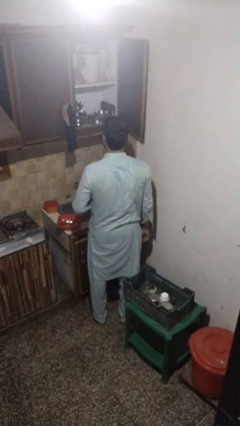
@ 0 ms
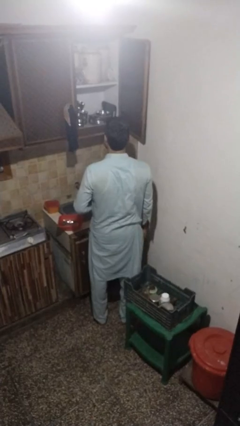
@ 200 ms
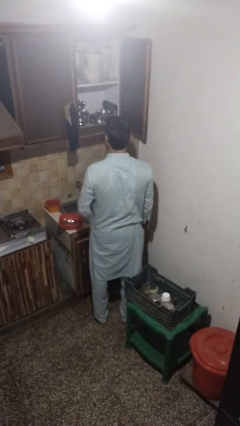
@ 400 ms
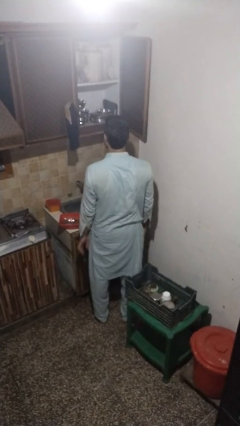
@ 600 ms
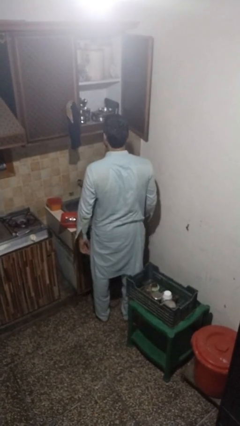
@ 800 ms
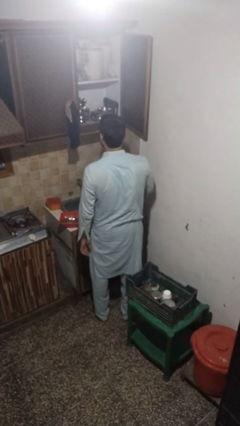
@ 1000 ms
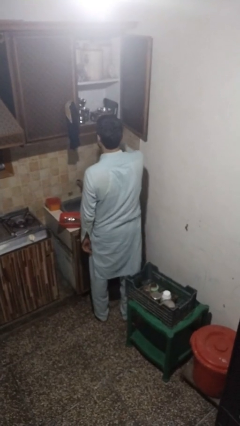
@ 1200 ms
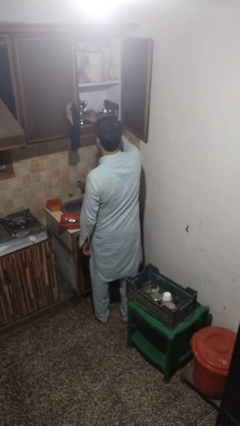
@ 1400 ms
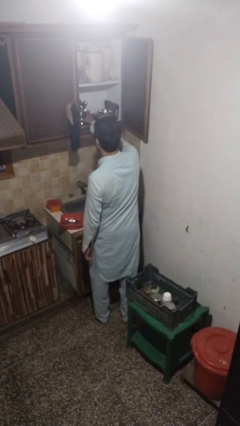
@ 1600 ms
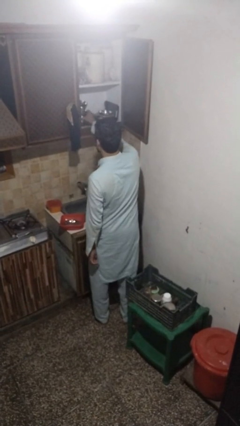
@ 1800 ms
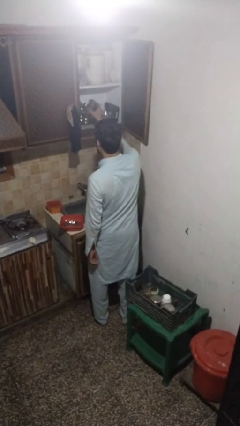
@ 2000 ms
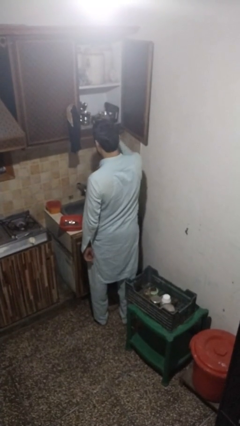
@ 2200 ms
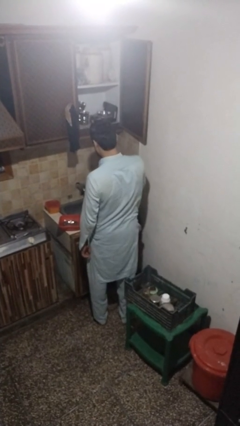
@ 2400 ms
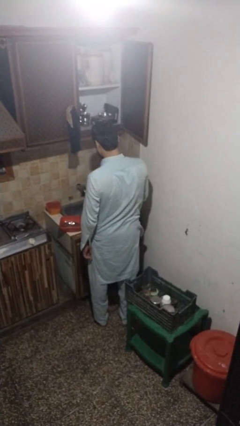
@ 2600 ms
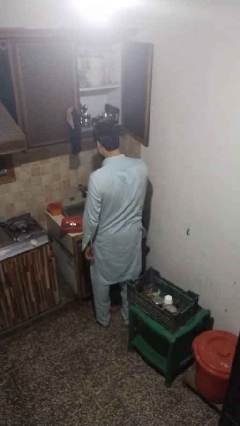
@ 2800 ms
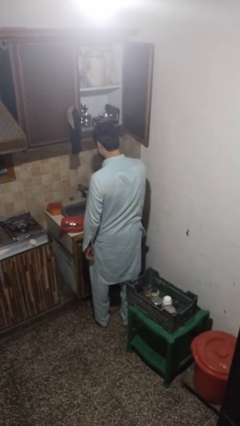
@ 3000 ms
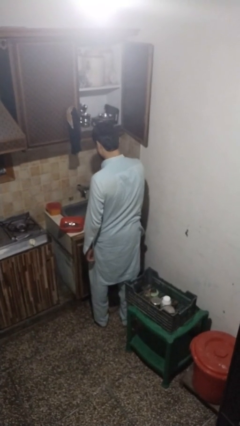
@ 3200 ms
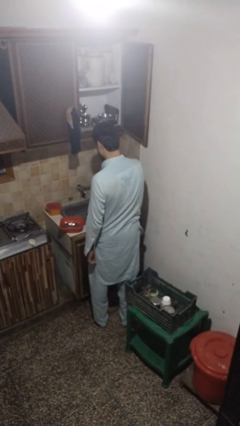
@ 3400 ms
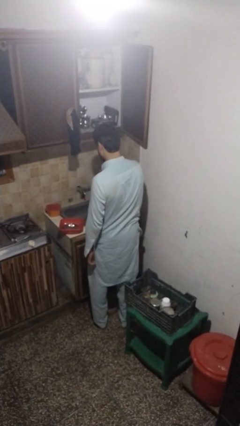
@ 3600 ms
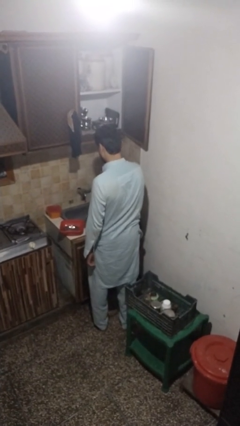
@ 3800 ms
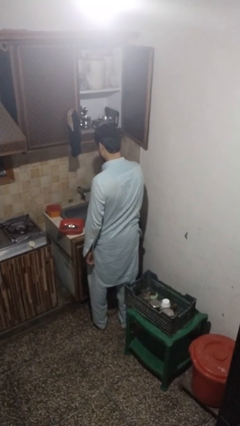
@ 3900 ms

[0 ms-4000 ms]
person takes object from cabinet

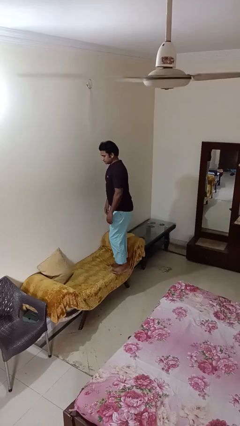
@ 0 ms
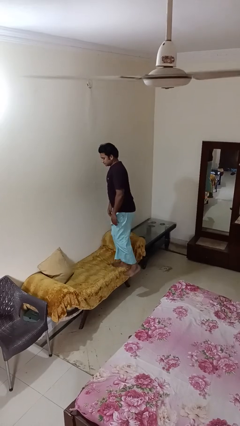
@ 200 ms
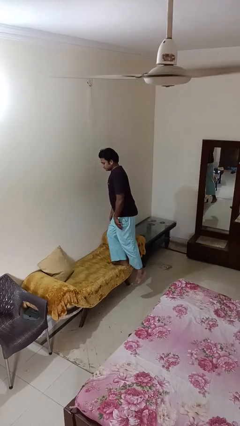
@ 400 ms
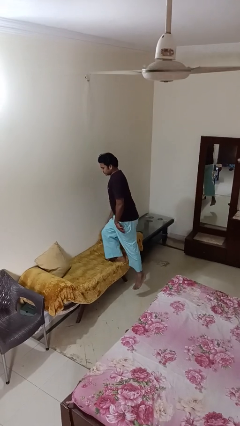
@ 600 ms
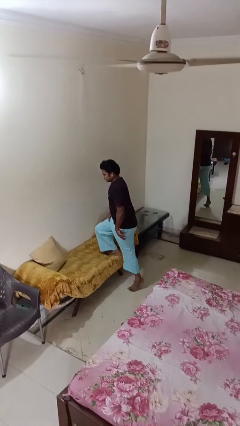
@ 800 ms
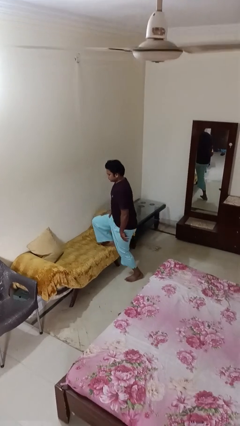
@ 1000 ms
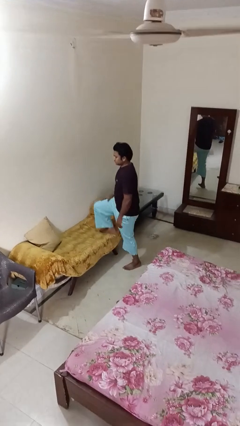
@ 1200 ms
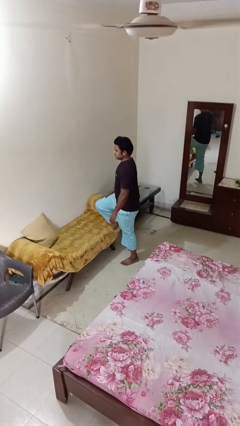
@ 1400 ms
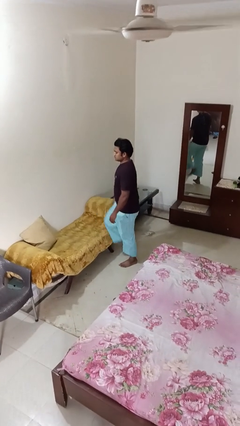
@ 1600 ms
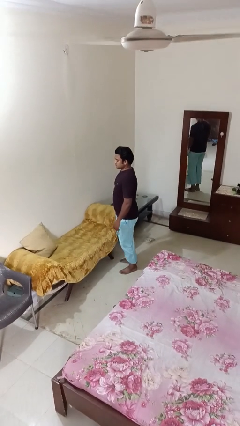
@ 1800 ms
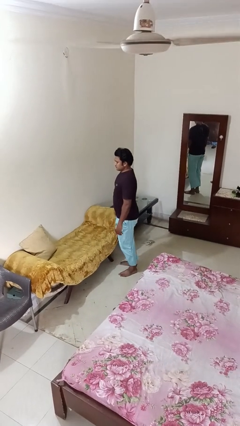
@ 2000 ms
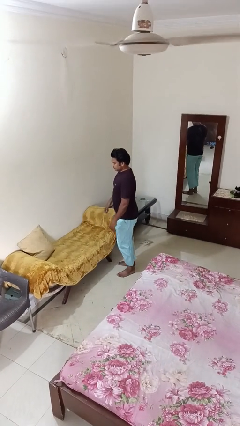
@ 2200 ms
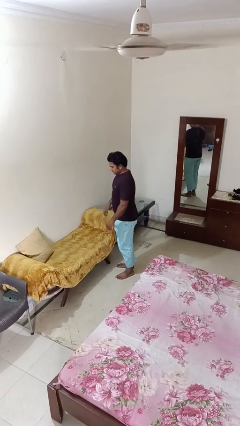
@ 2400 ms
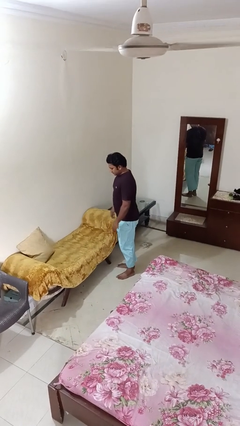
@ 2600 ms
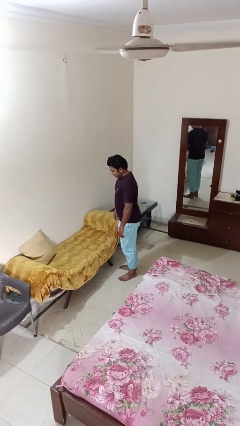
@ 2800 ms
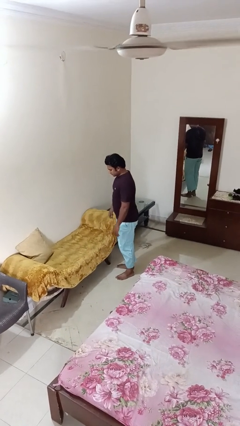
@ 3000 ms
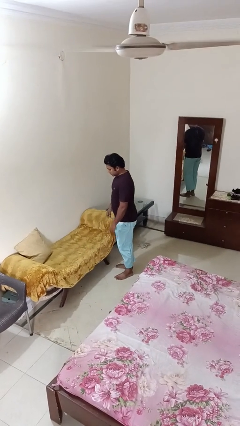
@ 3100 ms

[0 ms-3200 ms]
person climbs off couch

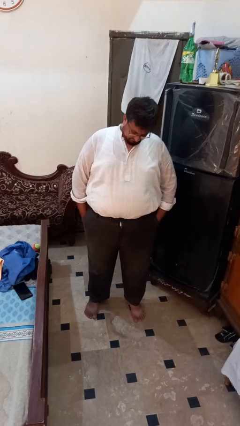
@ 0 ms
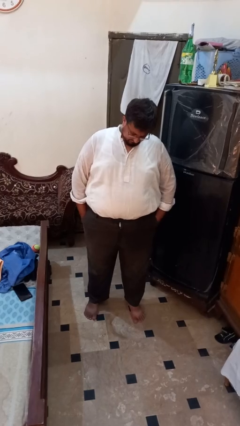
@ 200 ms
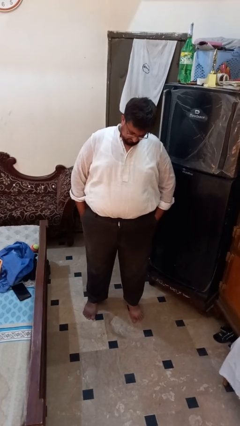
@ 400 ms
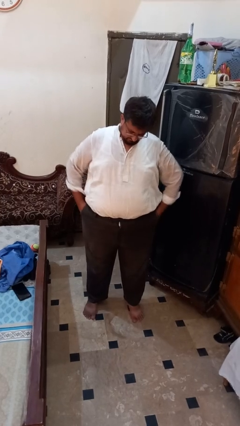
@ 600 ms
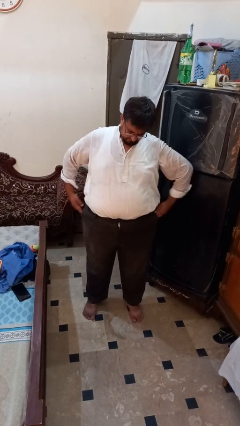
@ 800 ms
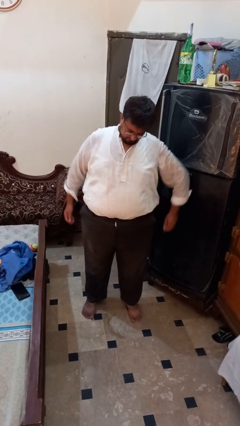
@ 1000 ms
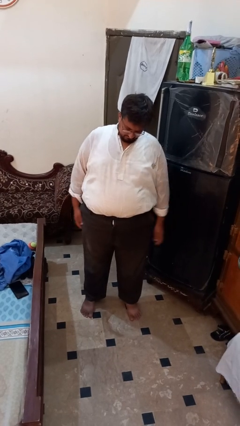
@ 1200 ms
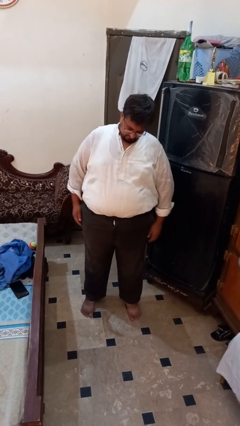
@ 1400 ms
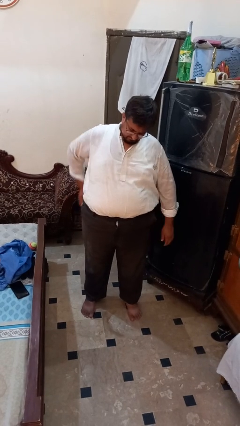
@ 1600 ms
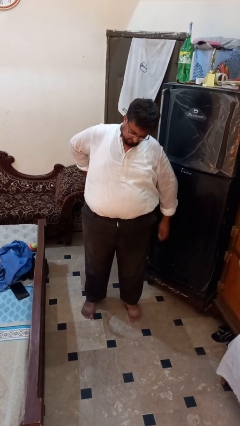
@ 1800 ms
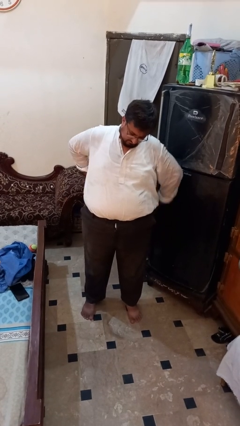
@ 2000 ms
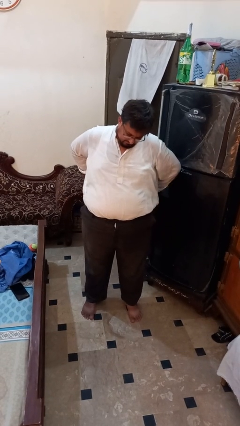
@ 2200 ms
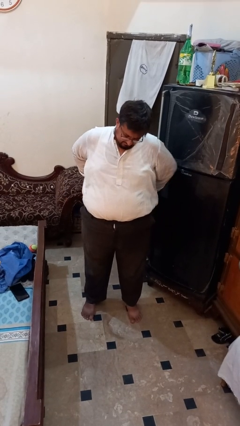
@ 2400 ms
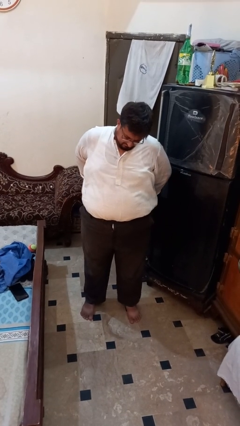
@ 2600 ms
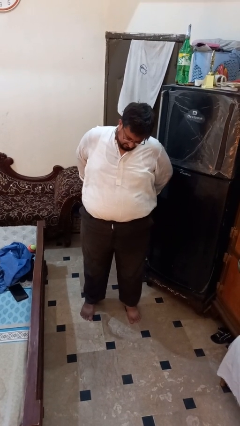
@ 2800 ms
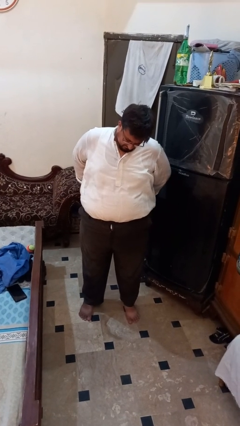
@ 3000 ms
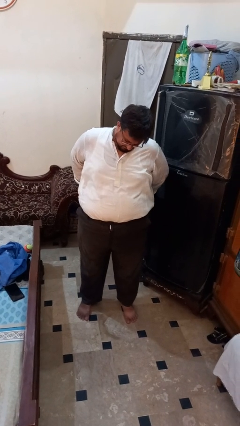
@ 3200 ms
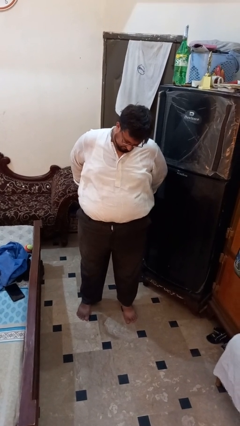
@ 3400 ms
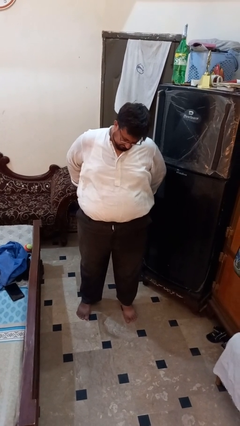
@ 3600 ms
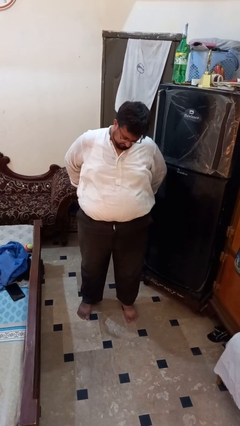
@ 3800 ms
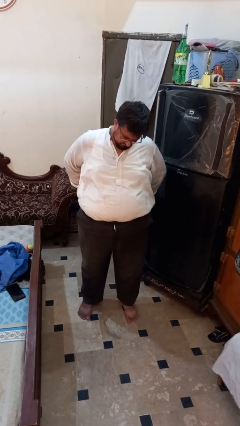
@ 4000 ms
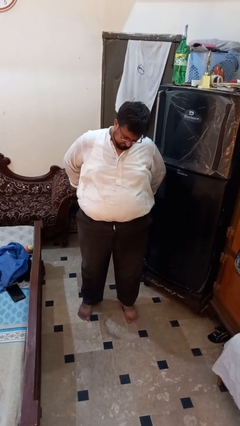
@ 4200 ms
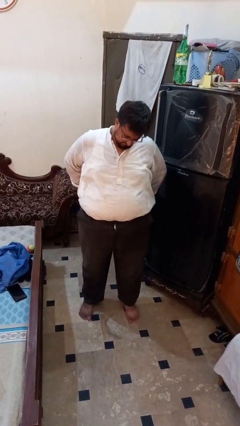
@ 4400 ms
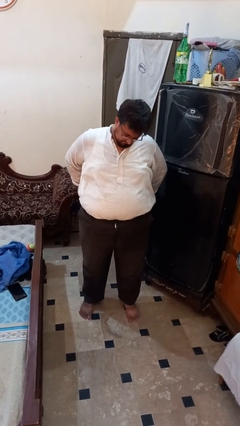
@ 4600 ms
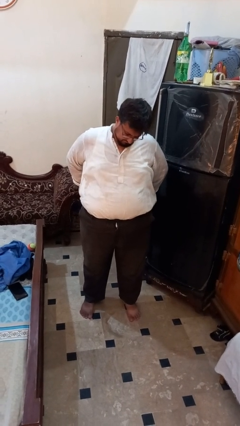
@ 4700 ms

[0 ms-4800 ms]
person puts hands in back pockets

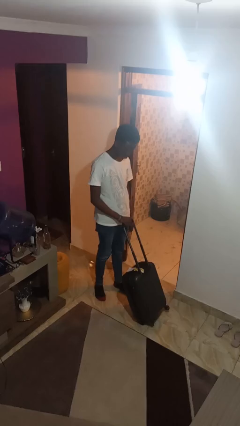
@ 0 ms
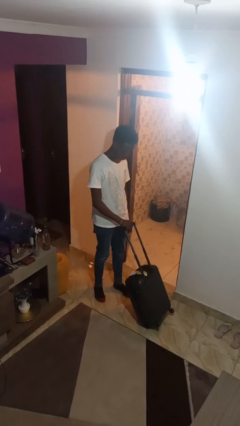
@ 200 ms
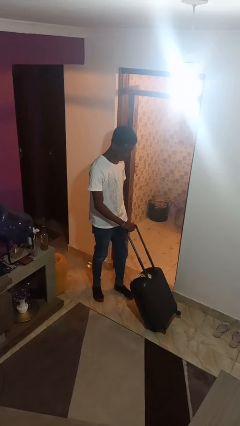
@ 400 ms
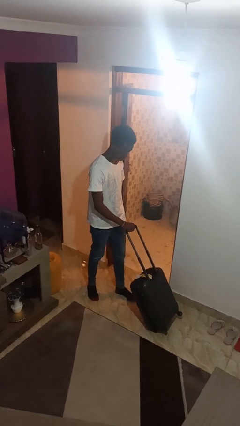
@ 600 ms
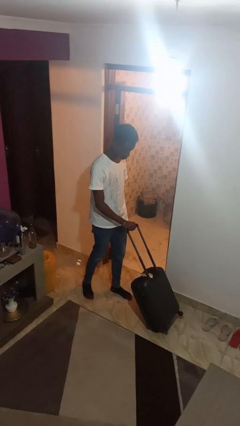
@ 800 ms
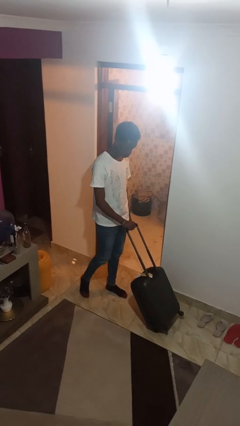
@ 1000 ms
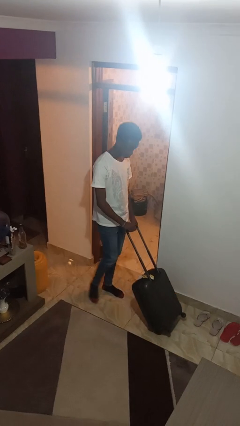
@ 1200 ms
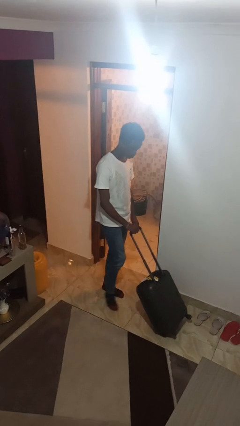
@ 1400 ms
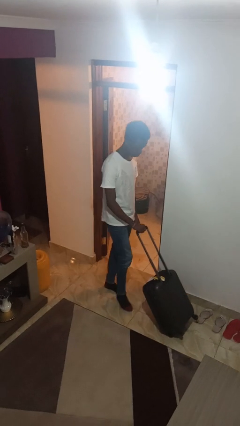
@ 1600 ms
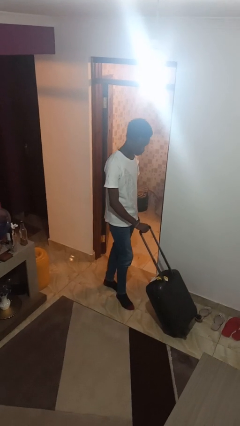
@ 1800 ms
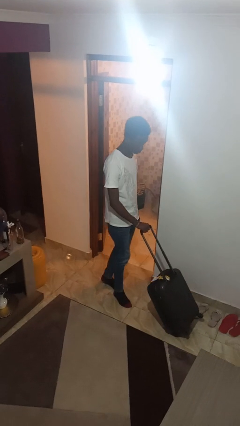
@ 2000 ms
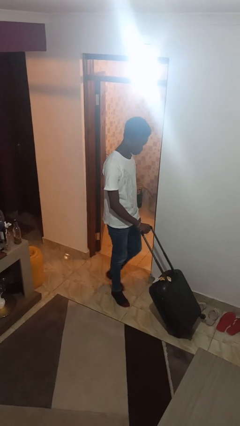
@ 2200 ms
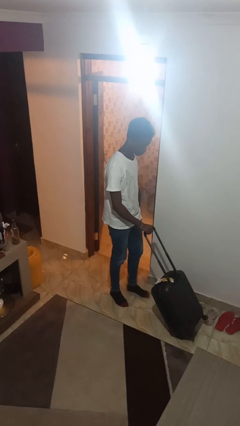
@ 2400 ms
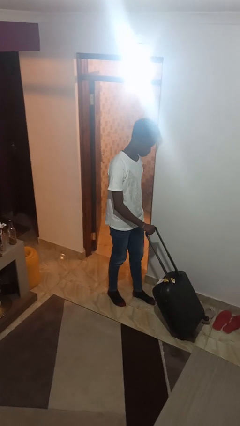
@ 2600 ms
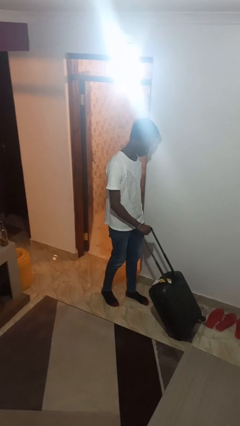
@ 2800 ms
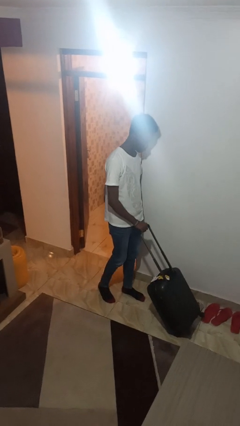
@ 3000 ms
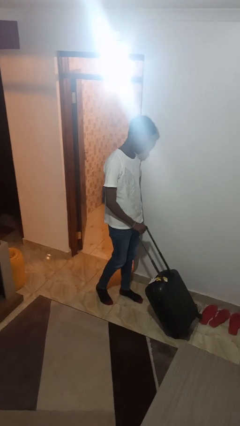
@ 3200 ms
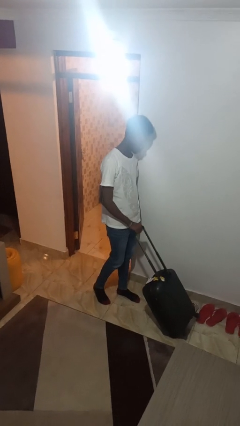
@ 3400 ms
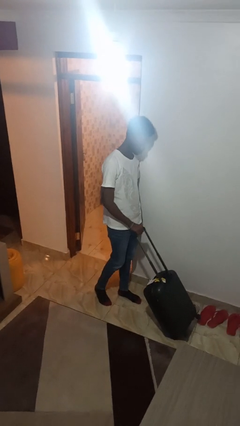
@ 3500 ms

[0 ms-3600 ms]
person pushes wheeled cart

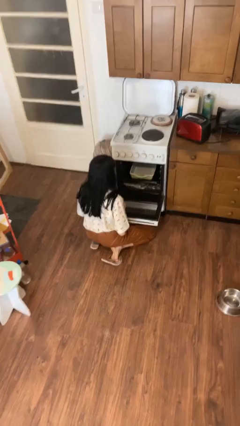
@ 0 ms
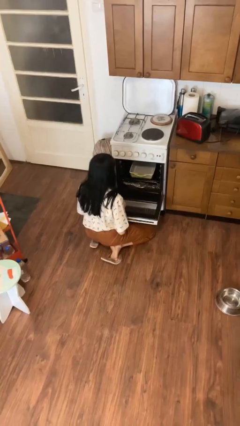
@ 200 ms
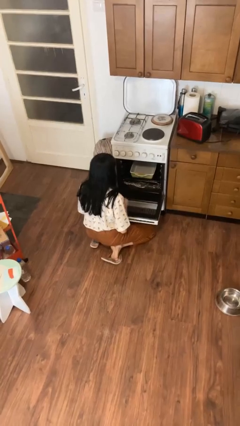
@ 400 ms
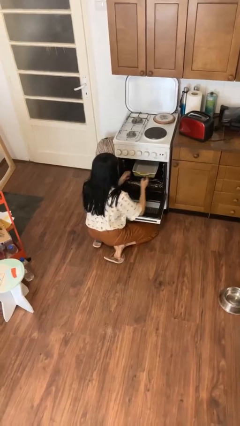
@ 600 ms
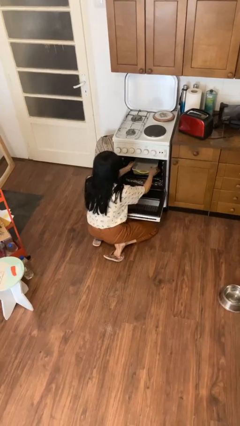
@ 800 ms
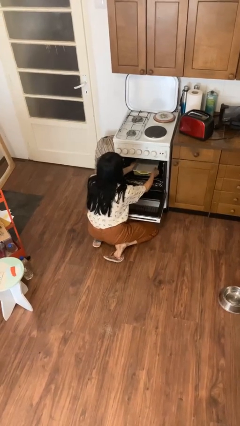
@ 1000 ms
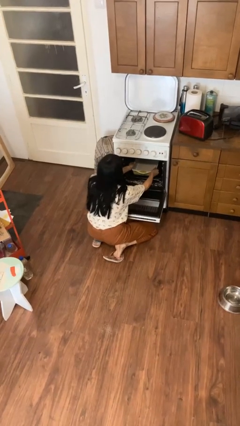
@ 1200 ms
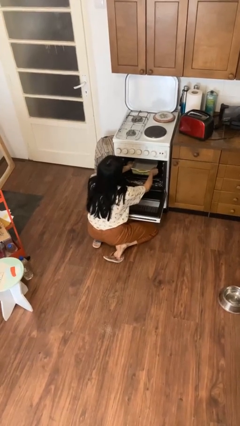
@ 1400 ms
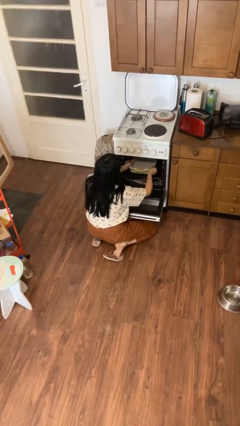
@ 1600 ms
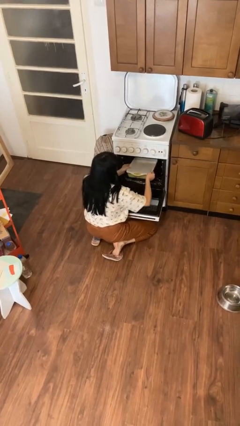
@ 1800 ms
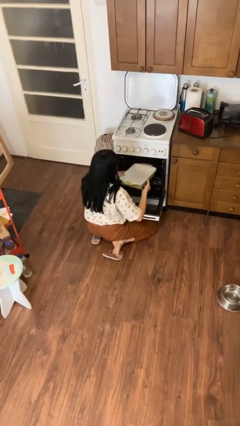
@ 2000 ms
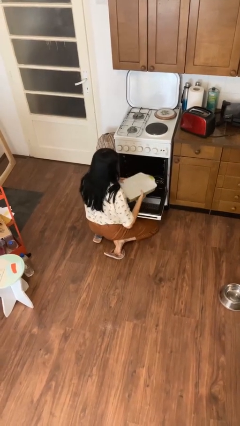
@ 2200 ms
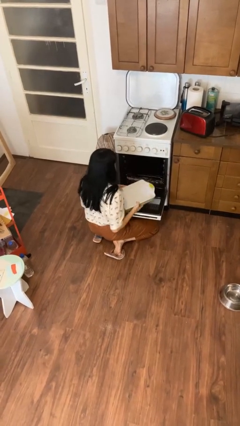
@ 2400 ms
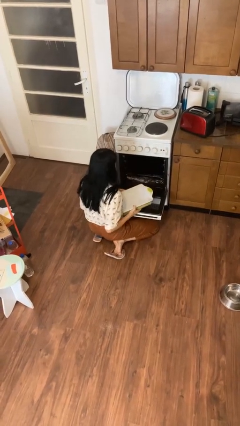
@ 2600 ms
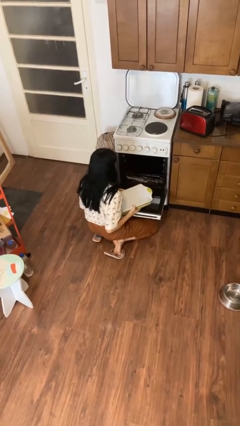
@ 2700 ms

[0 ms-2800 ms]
person takes object from oven
